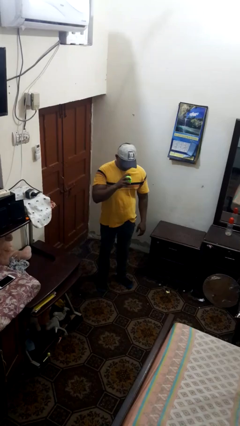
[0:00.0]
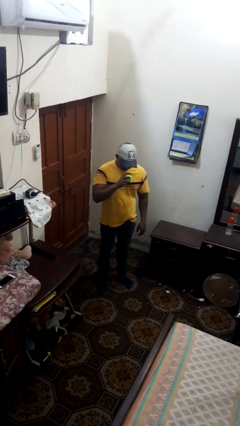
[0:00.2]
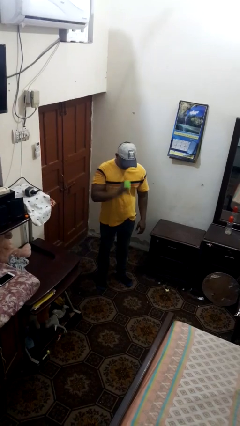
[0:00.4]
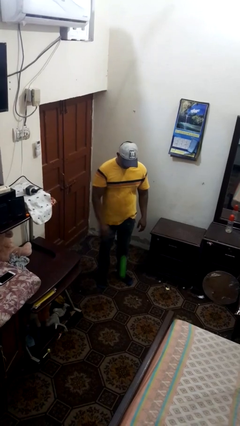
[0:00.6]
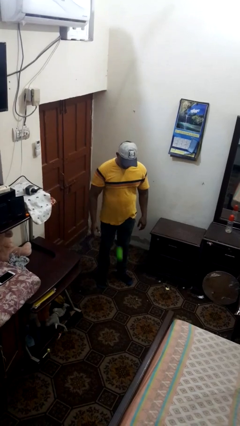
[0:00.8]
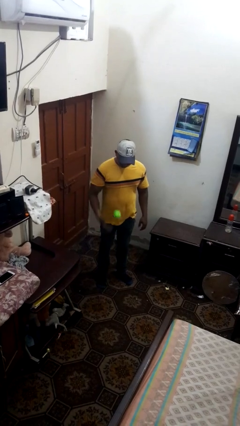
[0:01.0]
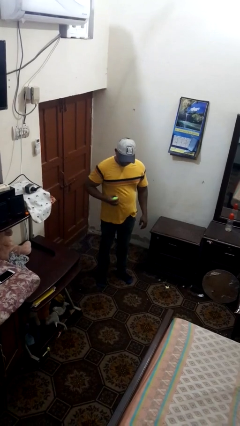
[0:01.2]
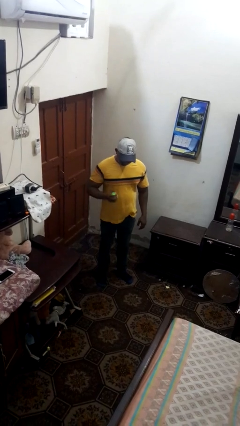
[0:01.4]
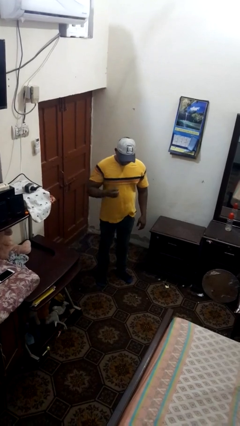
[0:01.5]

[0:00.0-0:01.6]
person bounces ball on floor

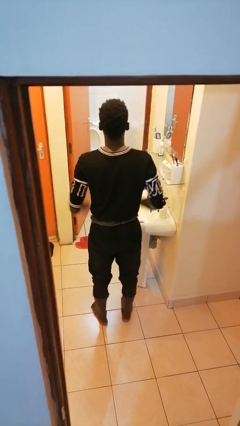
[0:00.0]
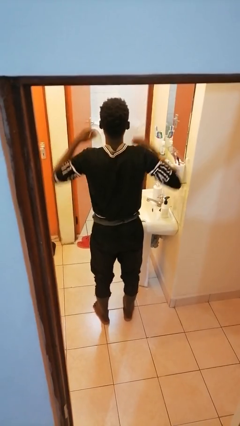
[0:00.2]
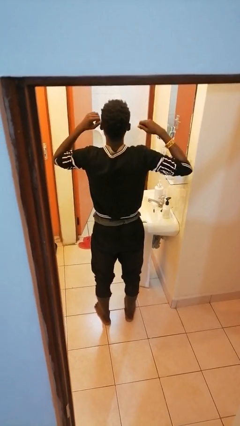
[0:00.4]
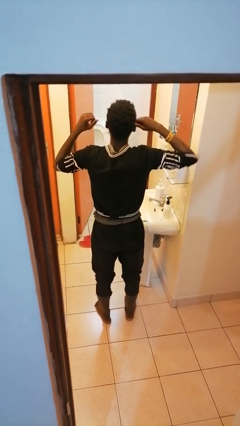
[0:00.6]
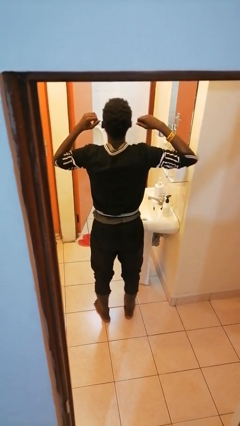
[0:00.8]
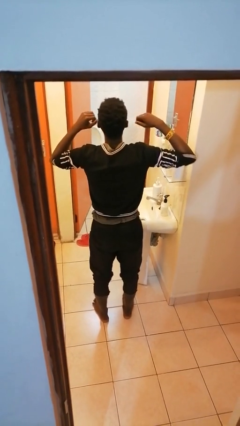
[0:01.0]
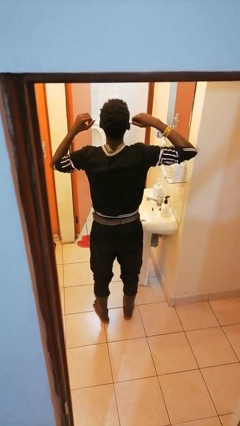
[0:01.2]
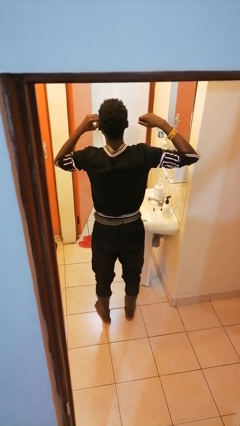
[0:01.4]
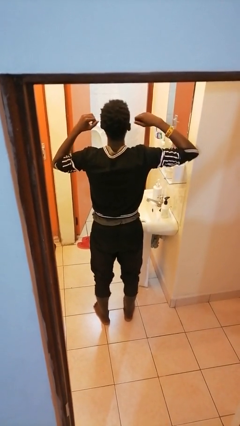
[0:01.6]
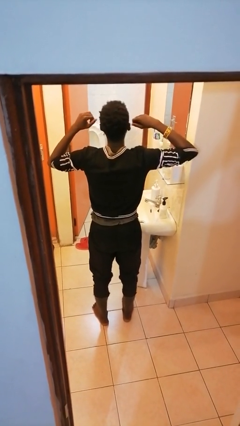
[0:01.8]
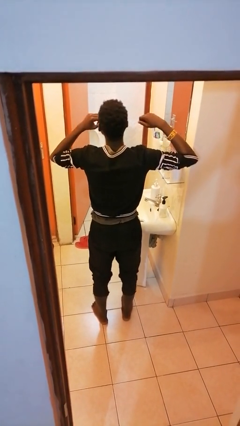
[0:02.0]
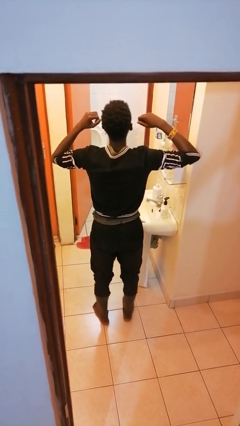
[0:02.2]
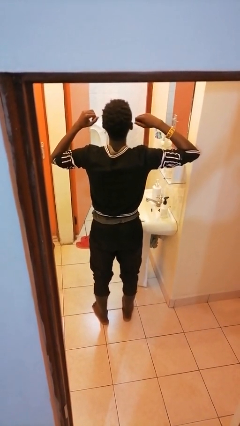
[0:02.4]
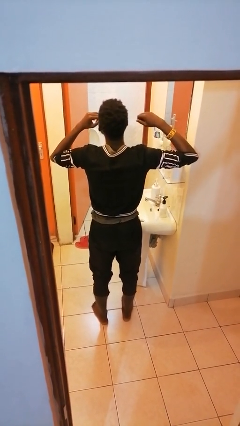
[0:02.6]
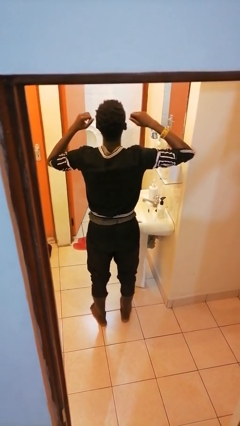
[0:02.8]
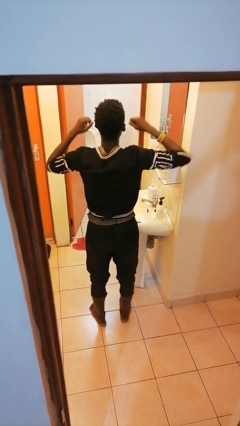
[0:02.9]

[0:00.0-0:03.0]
person flosses

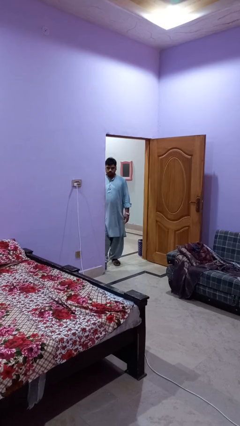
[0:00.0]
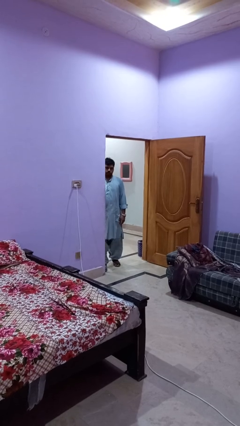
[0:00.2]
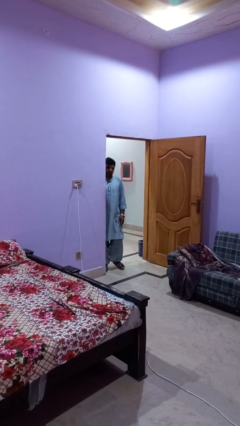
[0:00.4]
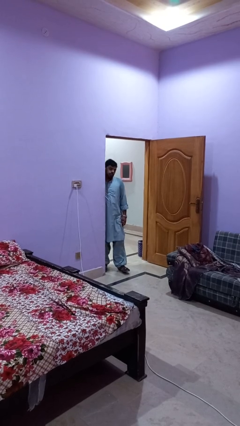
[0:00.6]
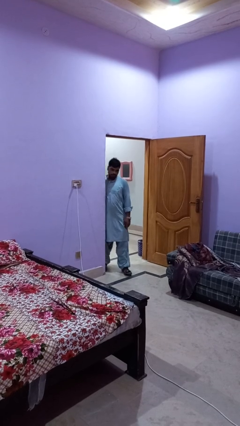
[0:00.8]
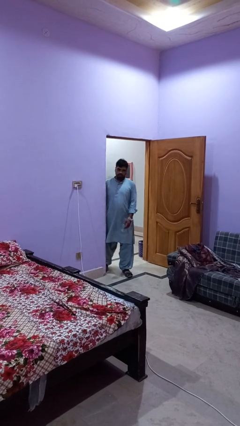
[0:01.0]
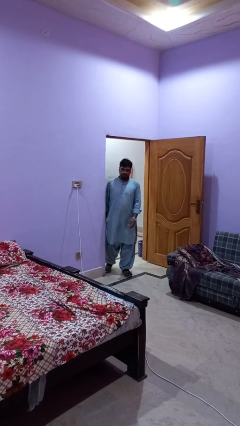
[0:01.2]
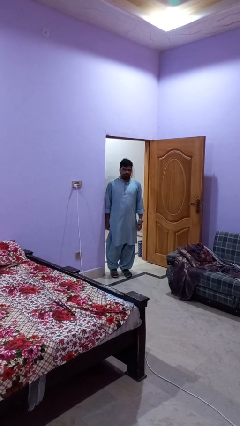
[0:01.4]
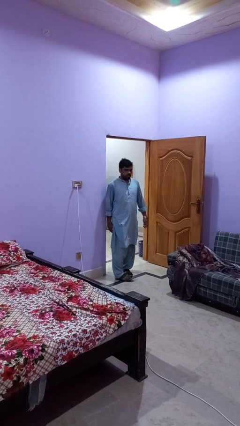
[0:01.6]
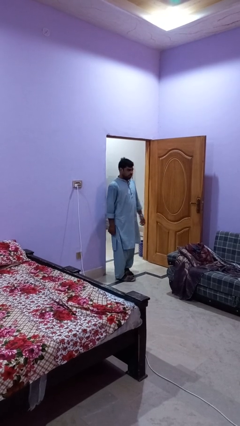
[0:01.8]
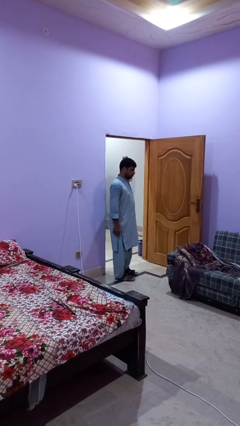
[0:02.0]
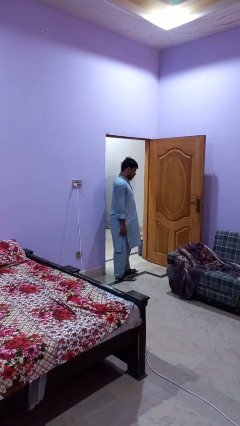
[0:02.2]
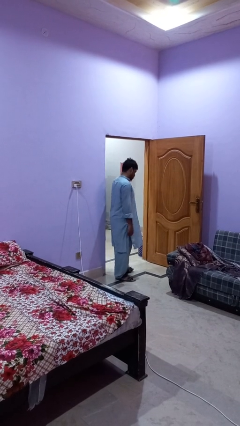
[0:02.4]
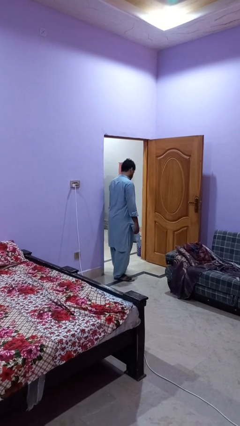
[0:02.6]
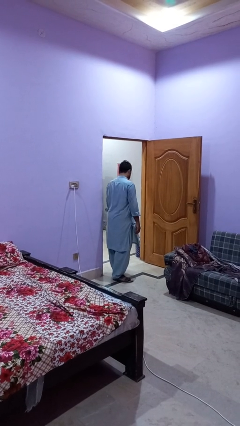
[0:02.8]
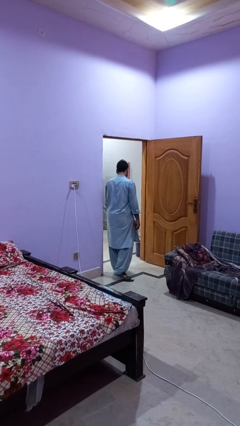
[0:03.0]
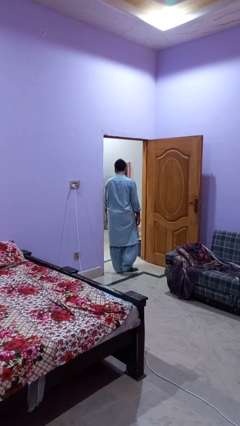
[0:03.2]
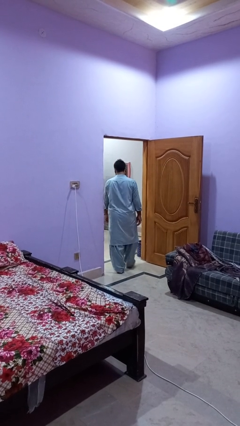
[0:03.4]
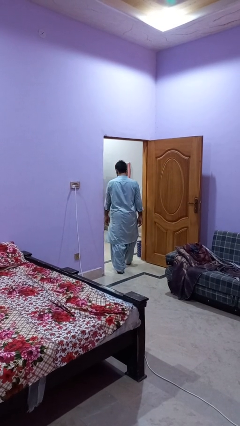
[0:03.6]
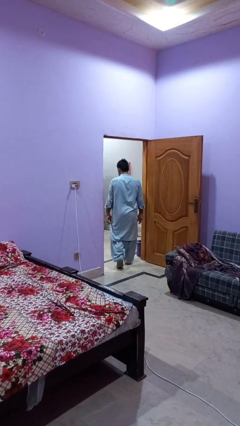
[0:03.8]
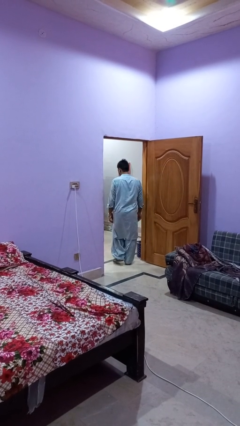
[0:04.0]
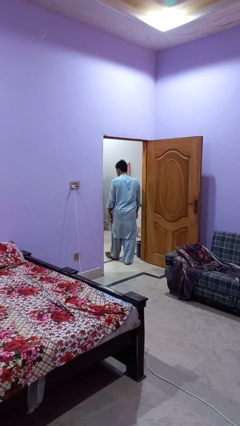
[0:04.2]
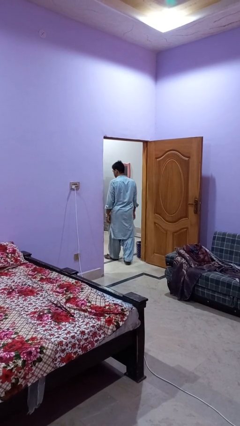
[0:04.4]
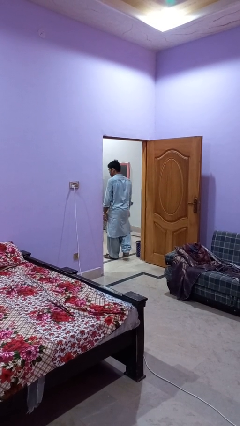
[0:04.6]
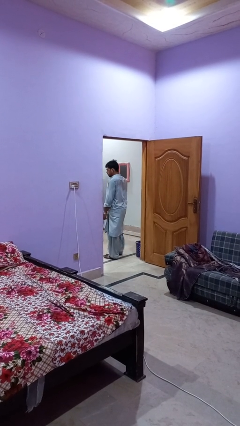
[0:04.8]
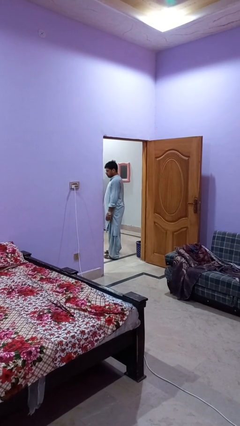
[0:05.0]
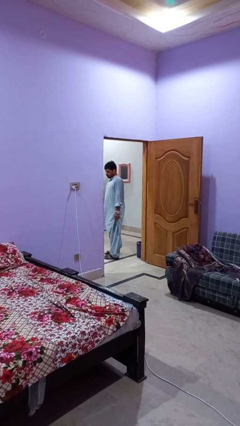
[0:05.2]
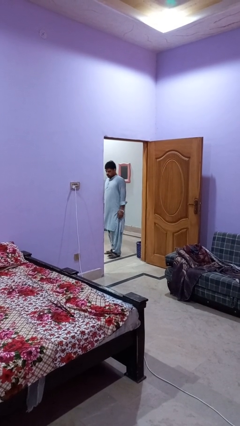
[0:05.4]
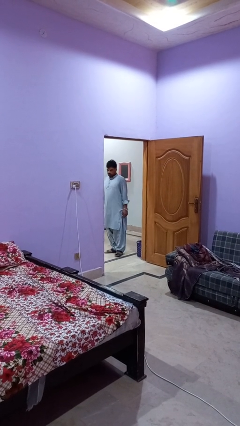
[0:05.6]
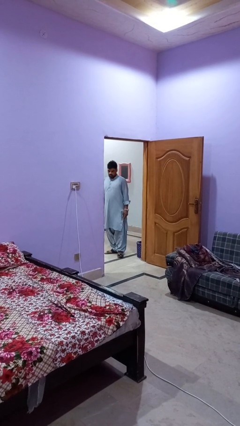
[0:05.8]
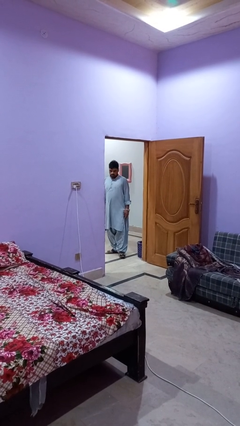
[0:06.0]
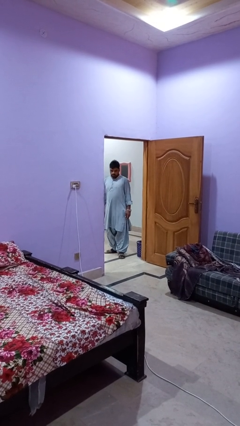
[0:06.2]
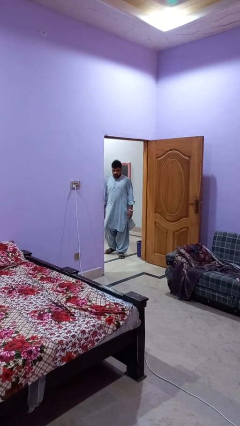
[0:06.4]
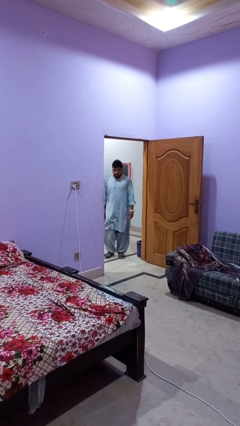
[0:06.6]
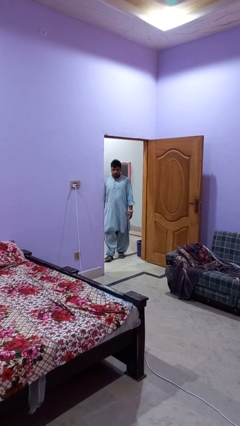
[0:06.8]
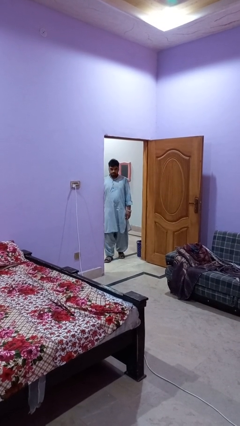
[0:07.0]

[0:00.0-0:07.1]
person bumps into wall

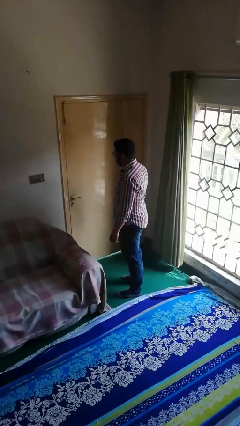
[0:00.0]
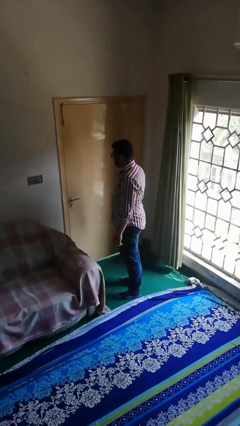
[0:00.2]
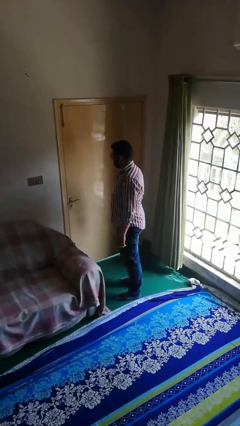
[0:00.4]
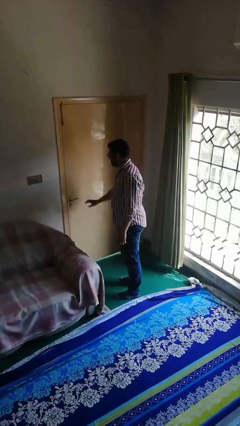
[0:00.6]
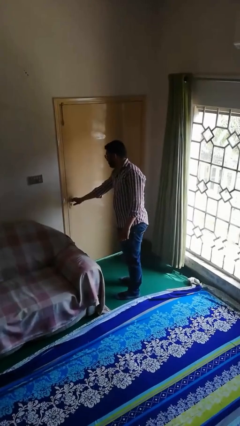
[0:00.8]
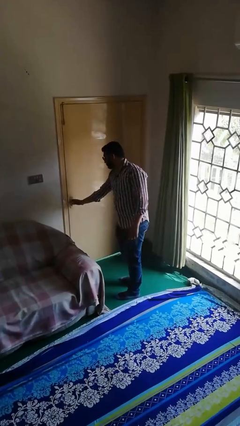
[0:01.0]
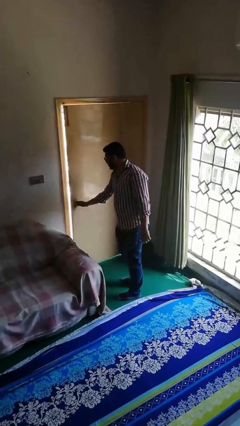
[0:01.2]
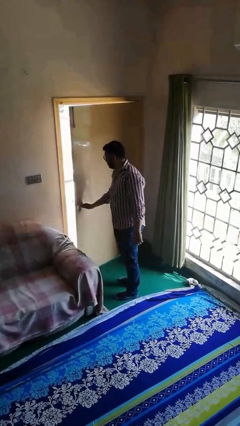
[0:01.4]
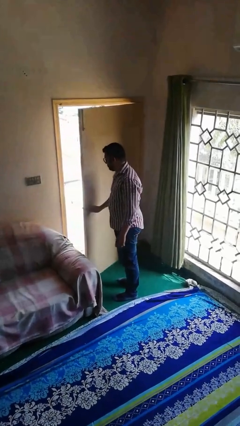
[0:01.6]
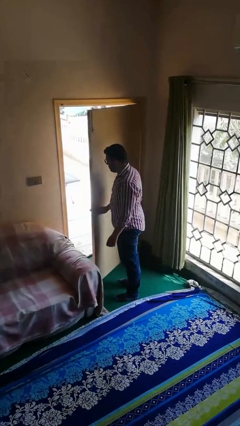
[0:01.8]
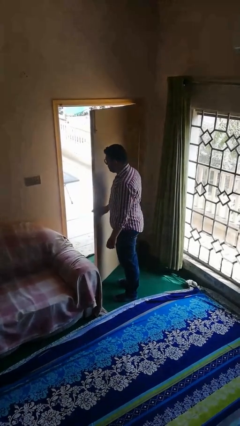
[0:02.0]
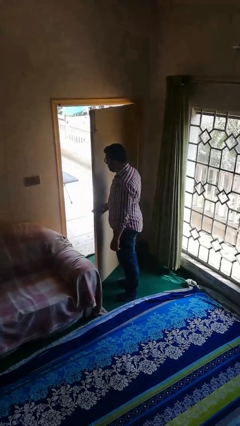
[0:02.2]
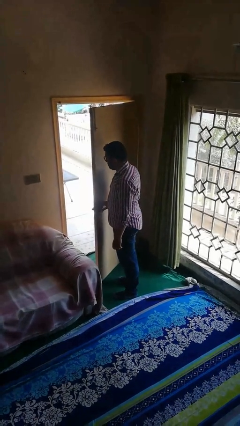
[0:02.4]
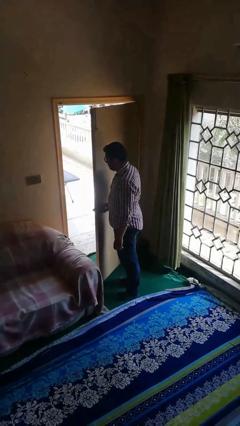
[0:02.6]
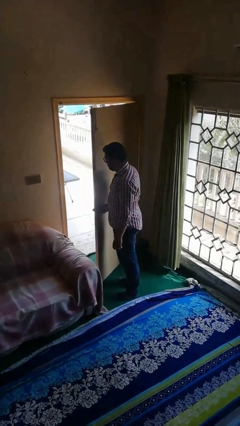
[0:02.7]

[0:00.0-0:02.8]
person opens facility door

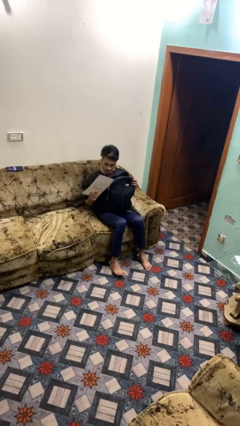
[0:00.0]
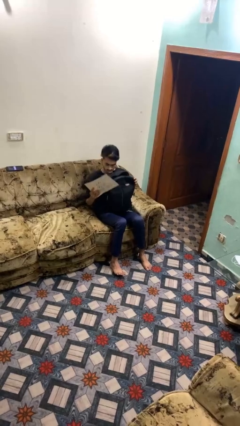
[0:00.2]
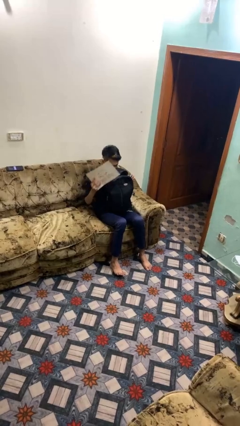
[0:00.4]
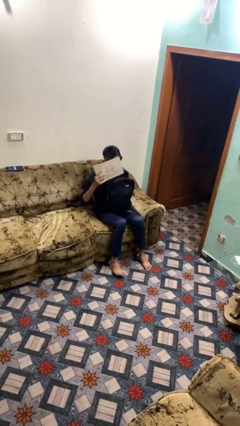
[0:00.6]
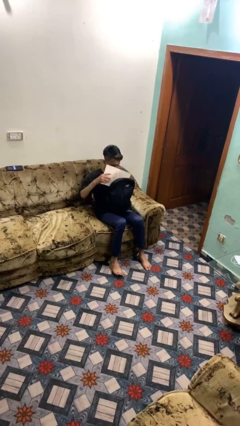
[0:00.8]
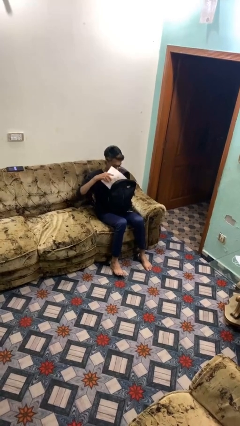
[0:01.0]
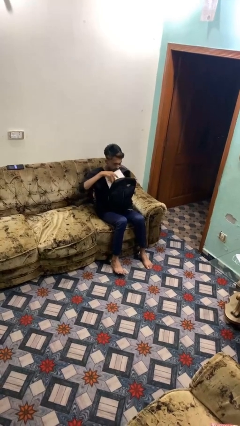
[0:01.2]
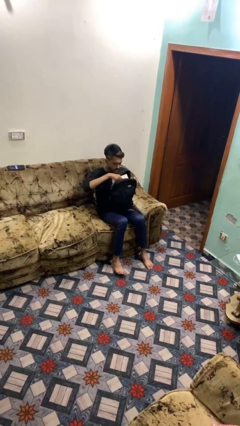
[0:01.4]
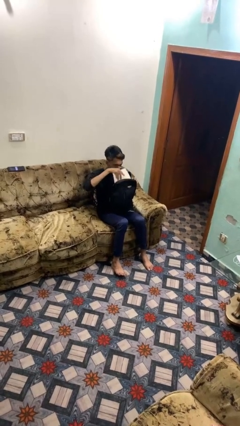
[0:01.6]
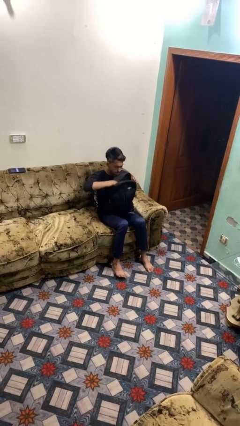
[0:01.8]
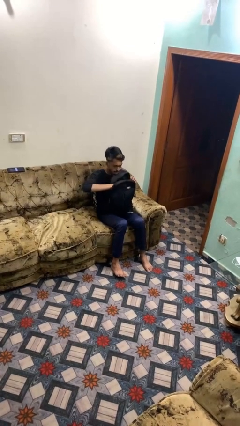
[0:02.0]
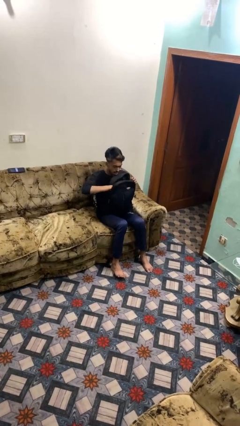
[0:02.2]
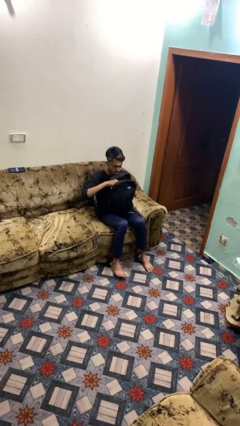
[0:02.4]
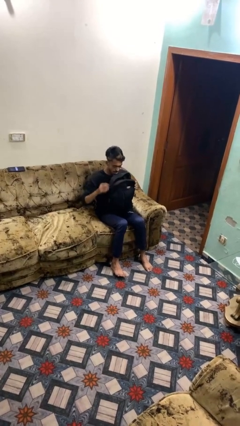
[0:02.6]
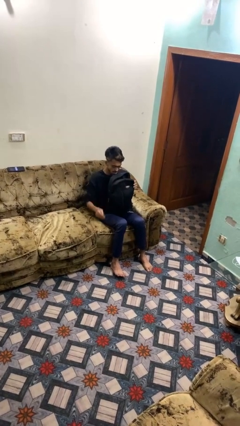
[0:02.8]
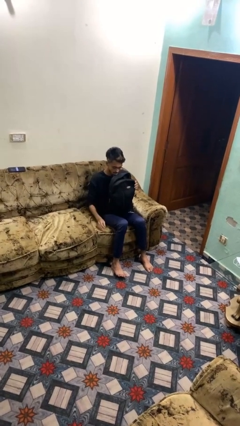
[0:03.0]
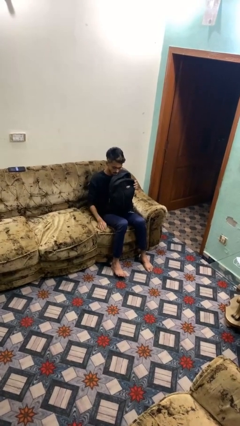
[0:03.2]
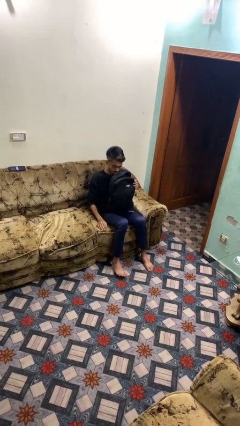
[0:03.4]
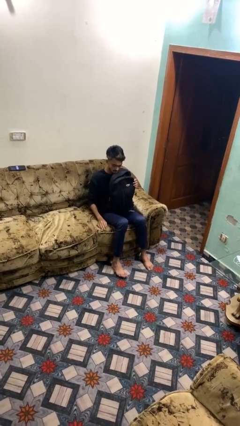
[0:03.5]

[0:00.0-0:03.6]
person puts object into backpack
